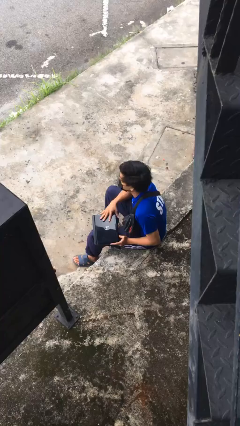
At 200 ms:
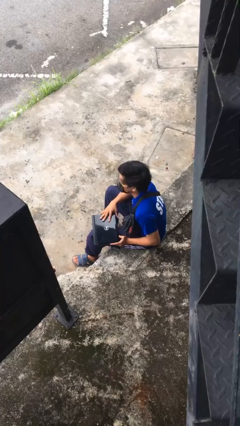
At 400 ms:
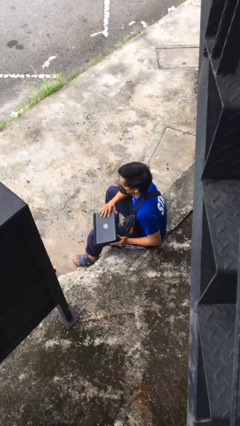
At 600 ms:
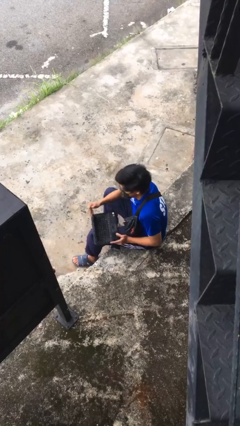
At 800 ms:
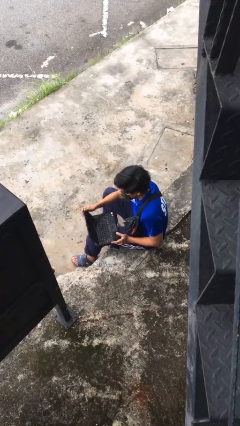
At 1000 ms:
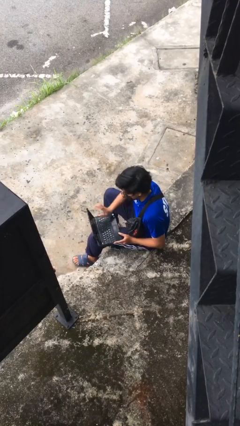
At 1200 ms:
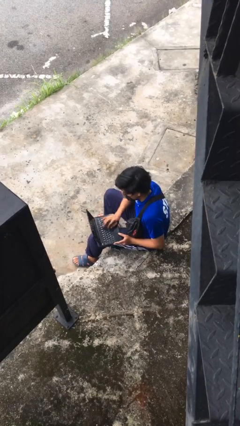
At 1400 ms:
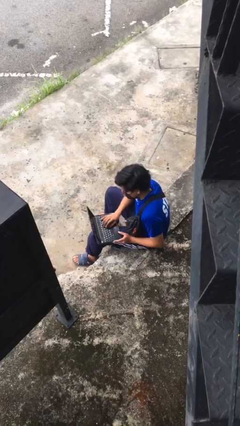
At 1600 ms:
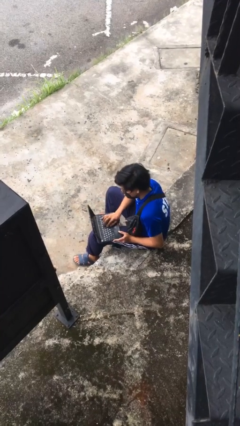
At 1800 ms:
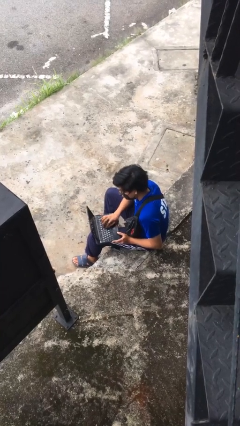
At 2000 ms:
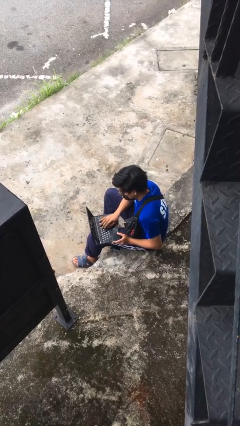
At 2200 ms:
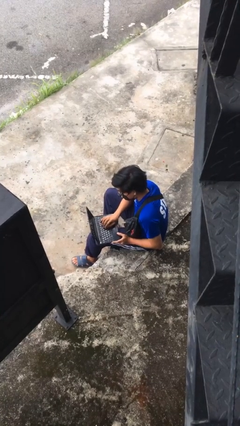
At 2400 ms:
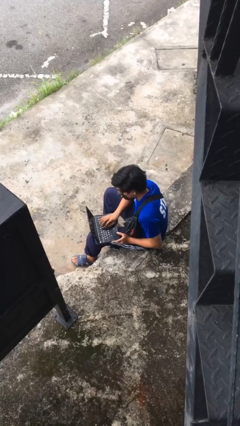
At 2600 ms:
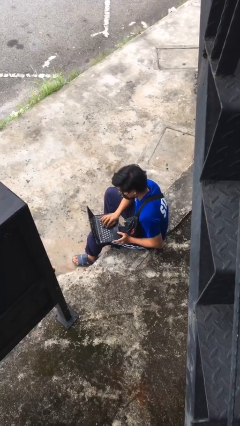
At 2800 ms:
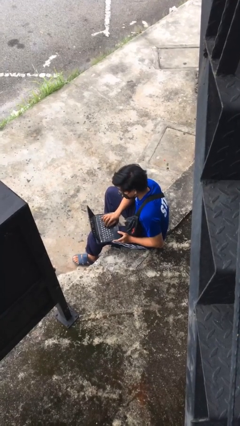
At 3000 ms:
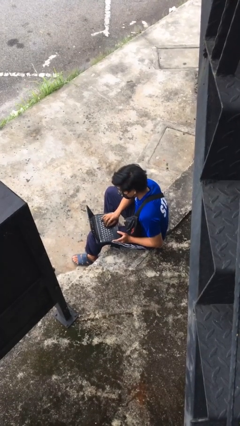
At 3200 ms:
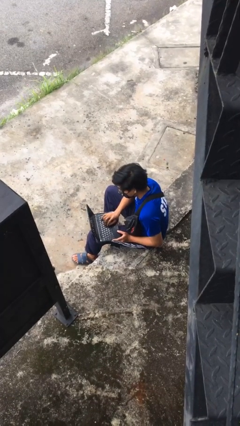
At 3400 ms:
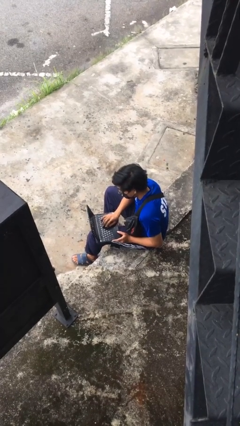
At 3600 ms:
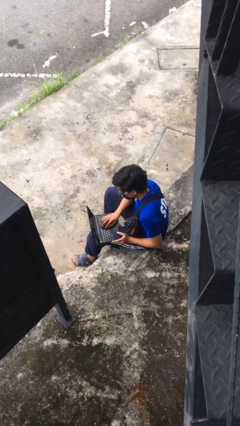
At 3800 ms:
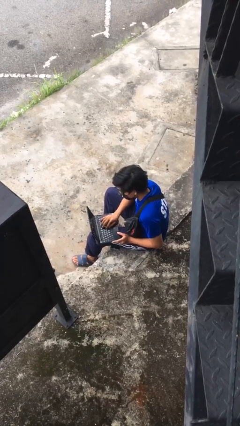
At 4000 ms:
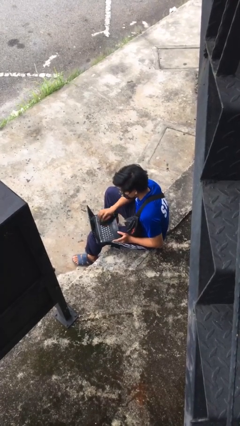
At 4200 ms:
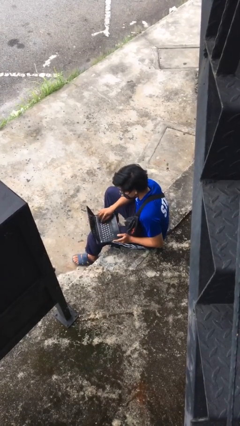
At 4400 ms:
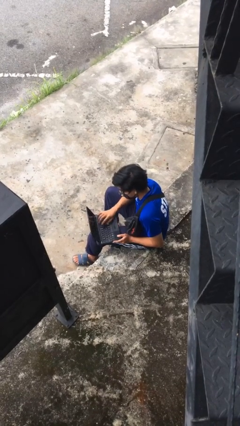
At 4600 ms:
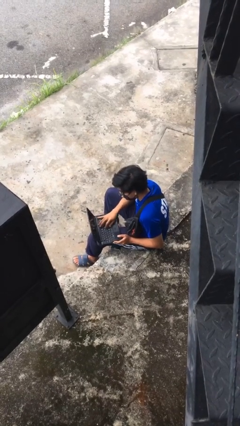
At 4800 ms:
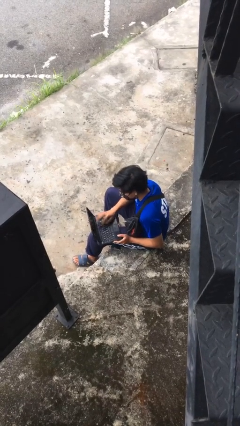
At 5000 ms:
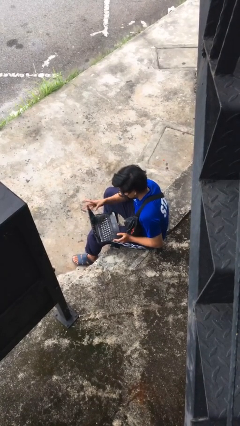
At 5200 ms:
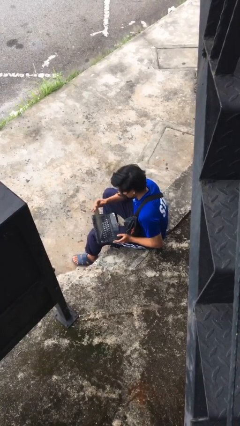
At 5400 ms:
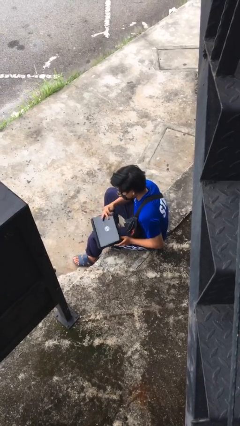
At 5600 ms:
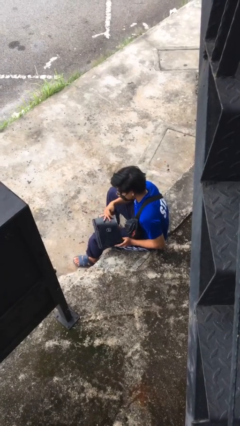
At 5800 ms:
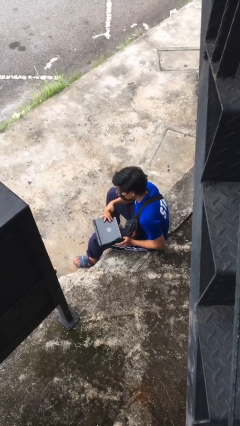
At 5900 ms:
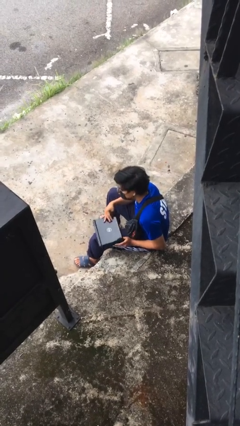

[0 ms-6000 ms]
person interacts with laptop

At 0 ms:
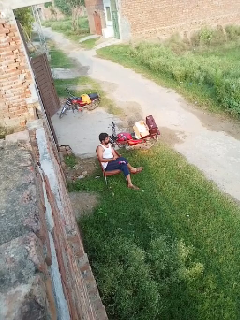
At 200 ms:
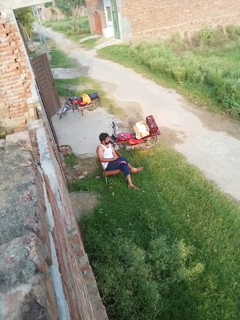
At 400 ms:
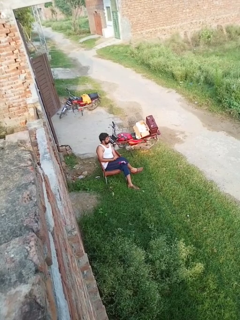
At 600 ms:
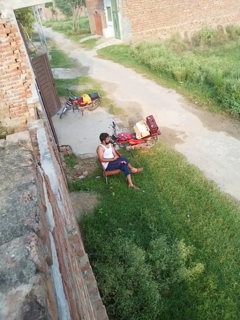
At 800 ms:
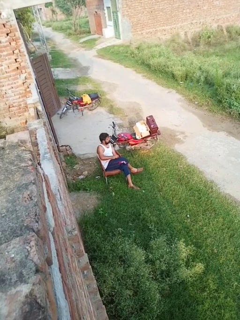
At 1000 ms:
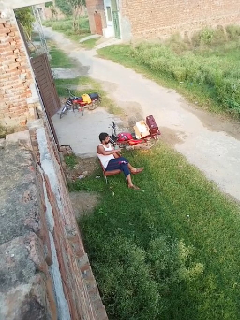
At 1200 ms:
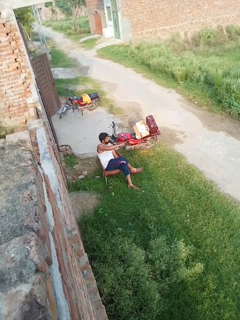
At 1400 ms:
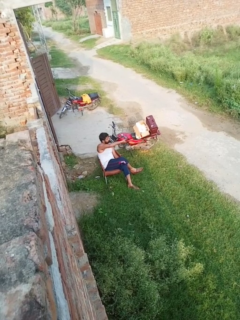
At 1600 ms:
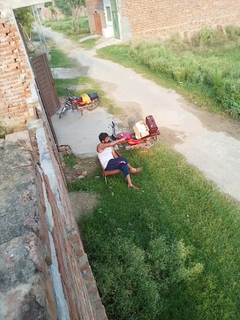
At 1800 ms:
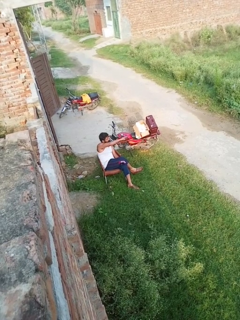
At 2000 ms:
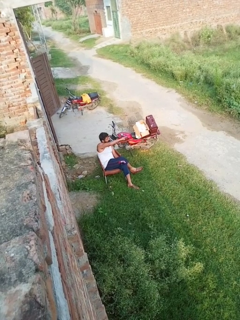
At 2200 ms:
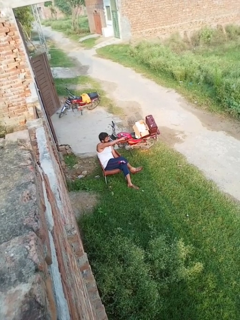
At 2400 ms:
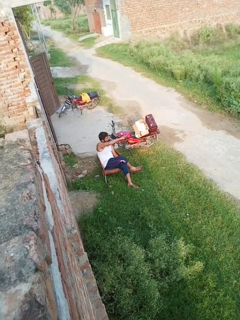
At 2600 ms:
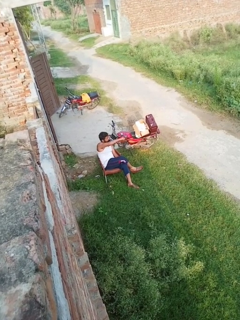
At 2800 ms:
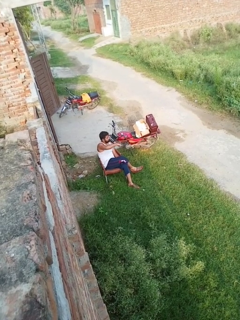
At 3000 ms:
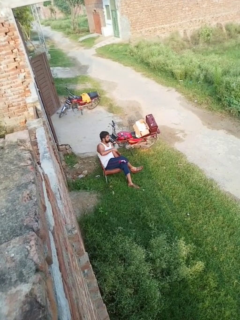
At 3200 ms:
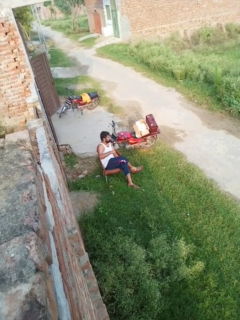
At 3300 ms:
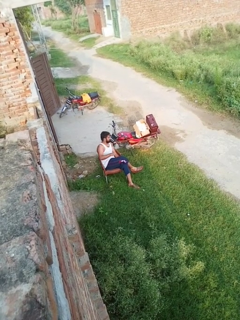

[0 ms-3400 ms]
person points at person

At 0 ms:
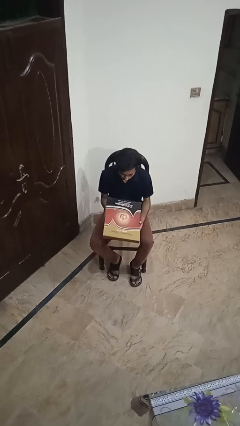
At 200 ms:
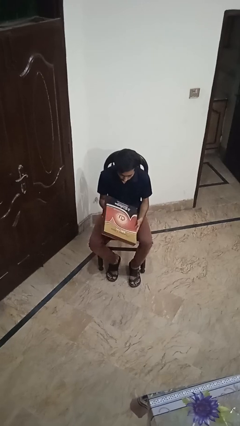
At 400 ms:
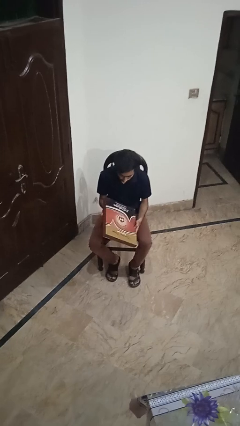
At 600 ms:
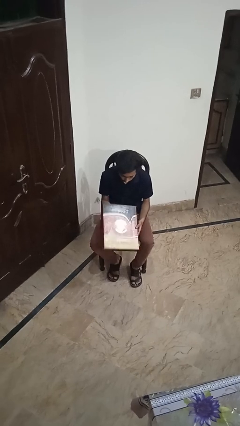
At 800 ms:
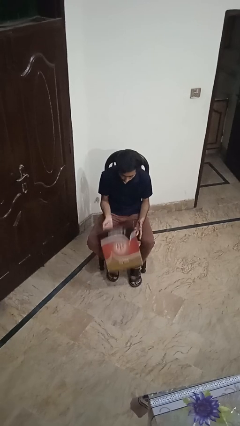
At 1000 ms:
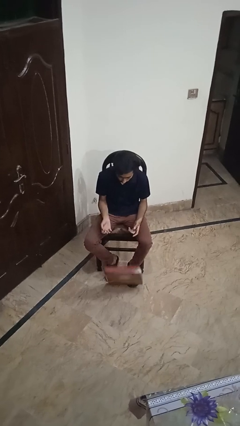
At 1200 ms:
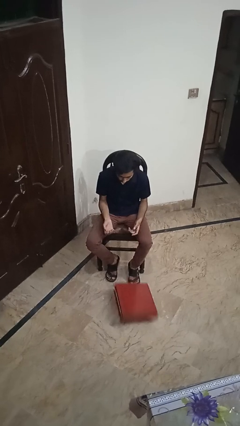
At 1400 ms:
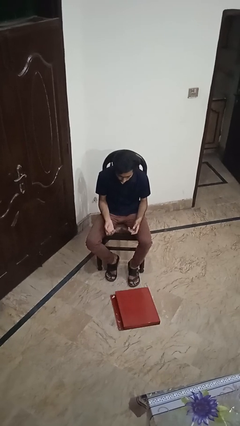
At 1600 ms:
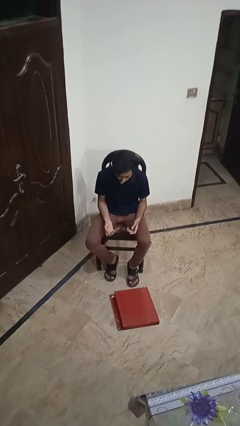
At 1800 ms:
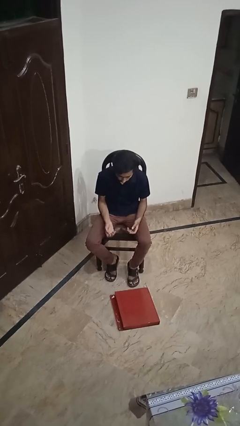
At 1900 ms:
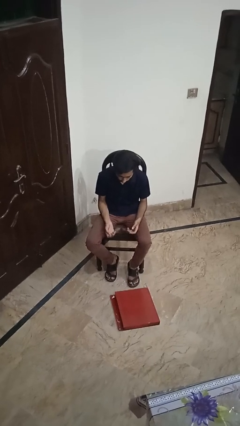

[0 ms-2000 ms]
person drops object

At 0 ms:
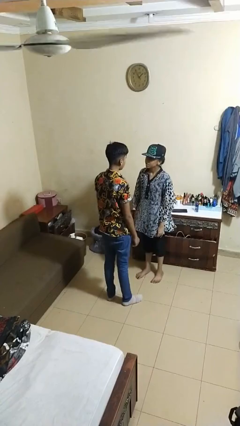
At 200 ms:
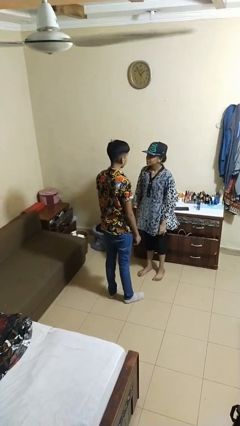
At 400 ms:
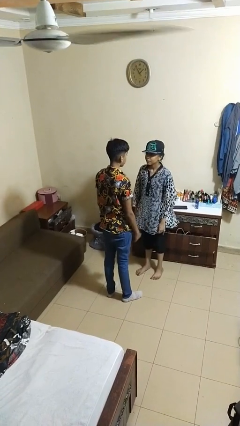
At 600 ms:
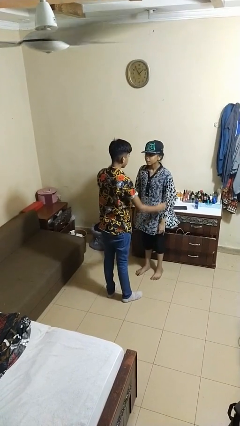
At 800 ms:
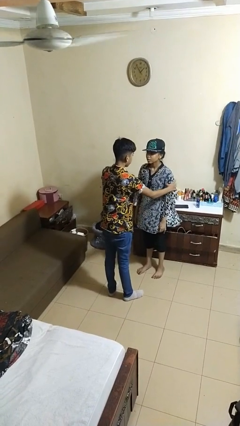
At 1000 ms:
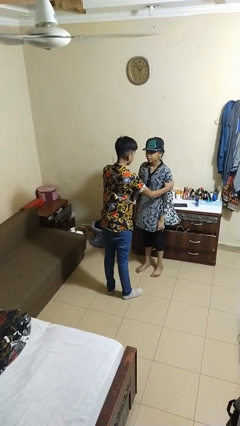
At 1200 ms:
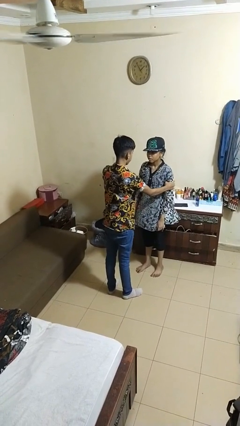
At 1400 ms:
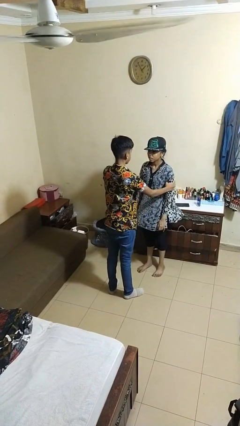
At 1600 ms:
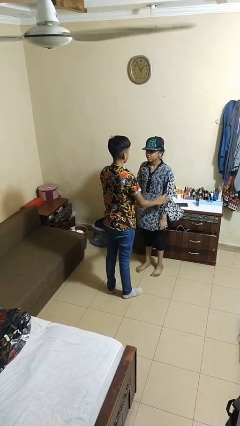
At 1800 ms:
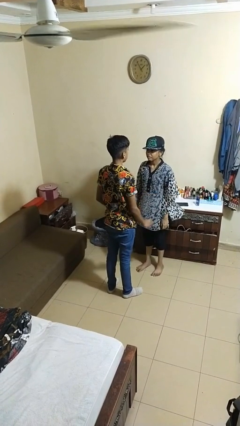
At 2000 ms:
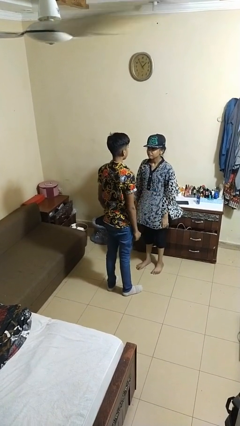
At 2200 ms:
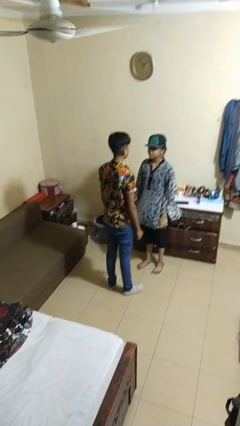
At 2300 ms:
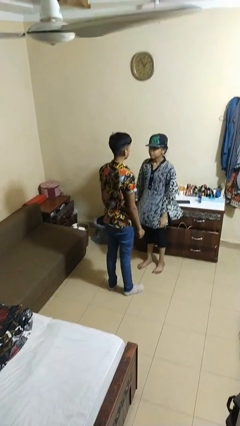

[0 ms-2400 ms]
person grabs person by bicep

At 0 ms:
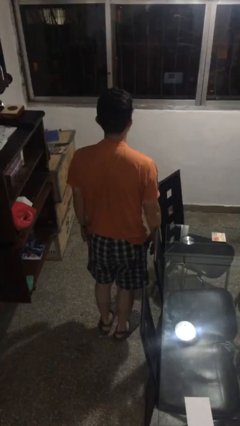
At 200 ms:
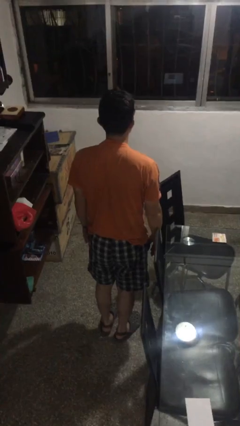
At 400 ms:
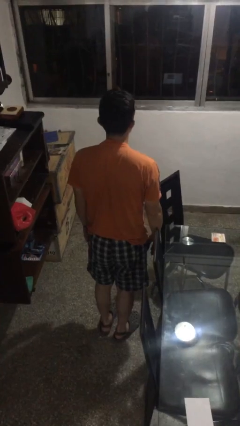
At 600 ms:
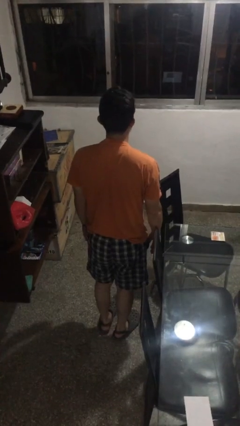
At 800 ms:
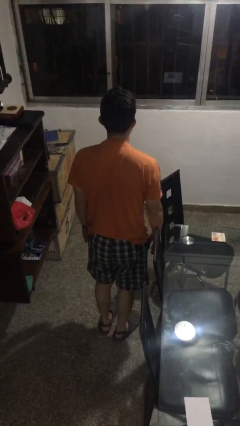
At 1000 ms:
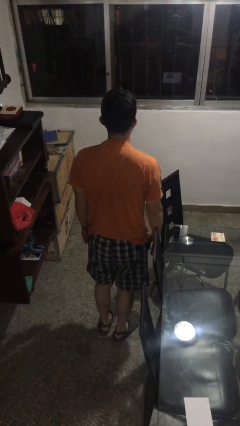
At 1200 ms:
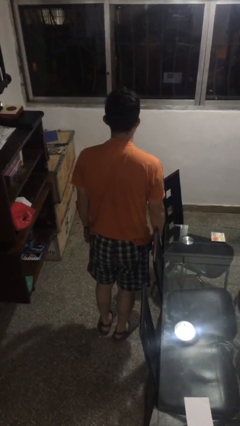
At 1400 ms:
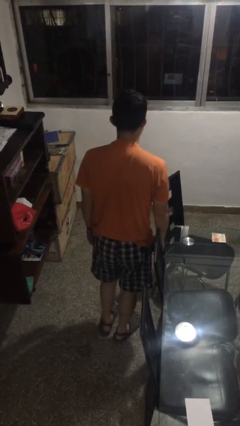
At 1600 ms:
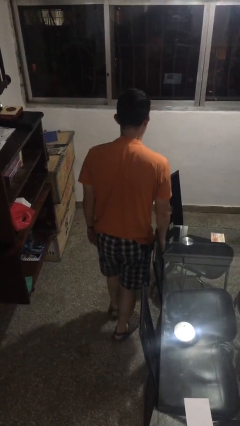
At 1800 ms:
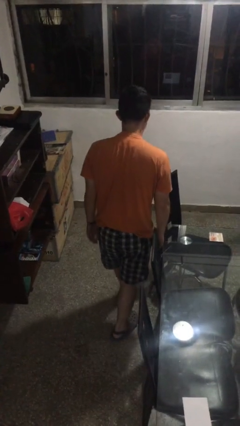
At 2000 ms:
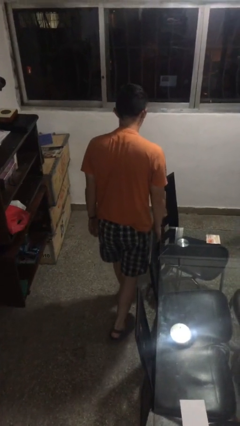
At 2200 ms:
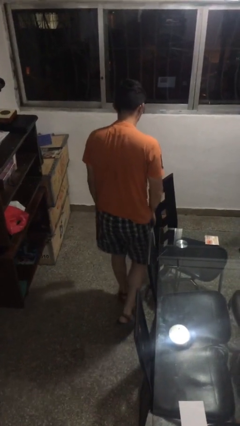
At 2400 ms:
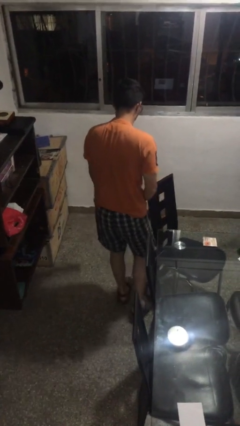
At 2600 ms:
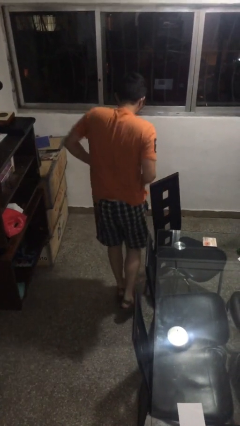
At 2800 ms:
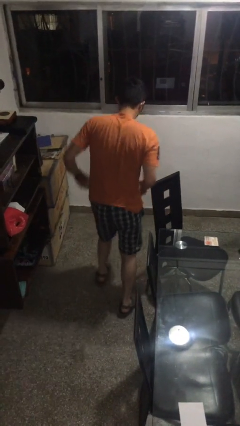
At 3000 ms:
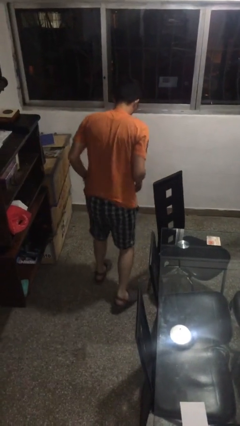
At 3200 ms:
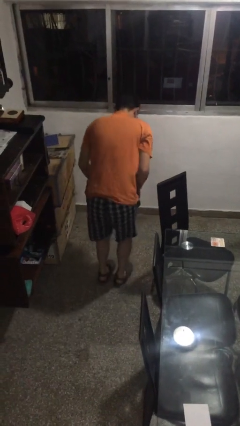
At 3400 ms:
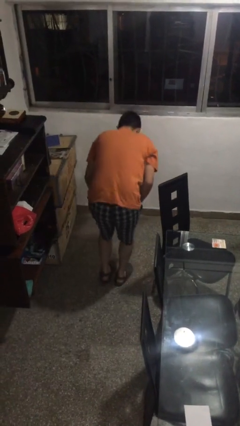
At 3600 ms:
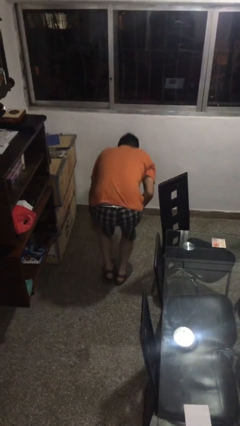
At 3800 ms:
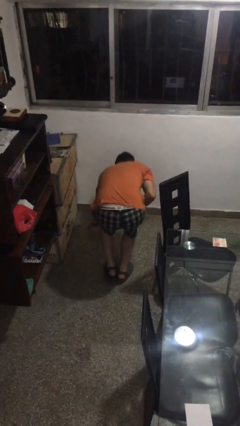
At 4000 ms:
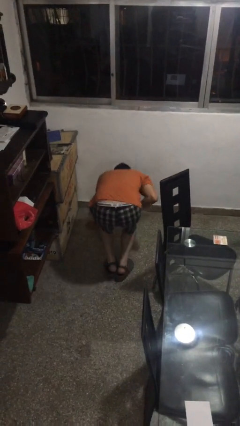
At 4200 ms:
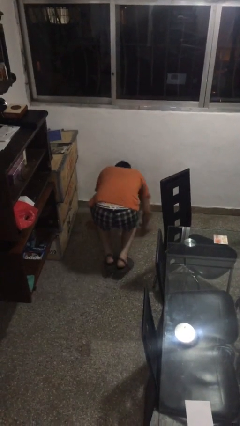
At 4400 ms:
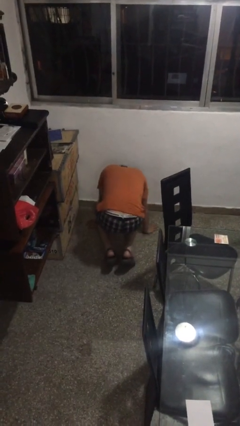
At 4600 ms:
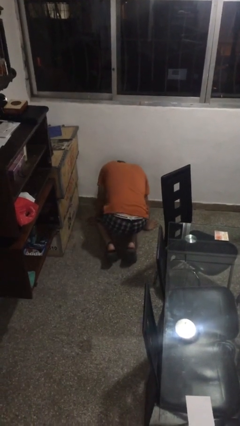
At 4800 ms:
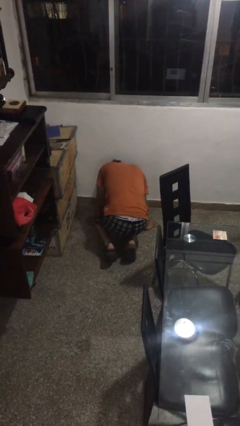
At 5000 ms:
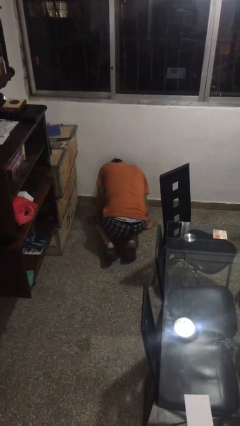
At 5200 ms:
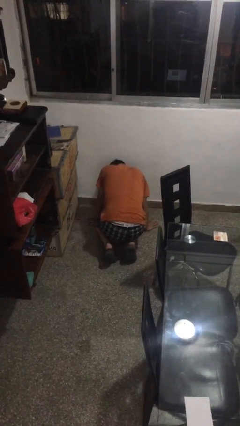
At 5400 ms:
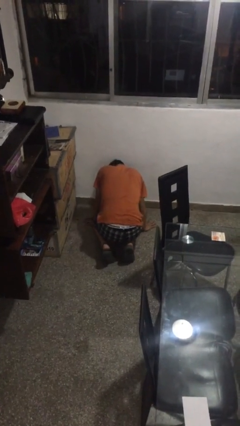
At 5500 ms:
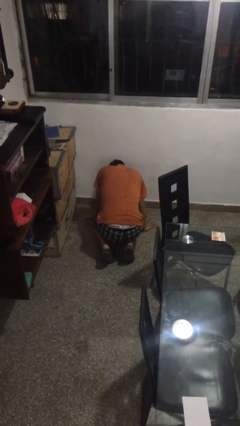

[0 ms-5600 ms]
person trips on object on floor
